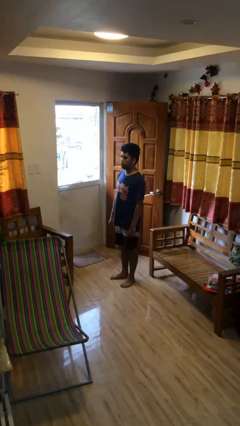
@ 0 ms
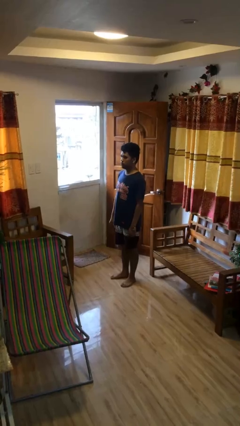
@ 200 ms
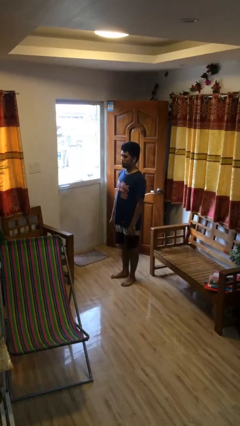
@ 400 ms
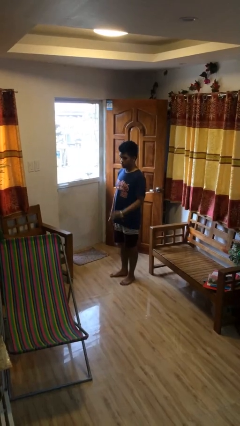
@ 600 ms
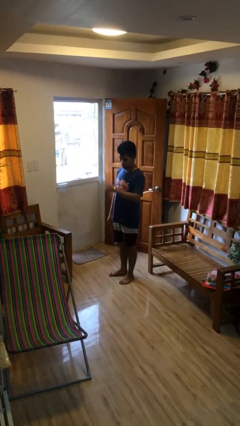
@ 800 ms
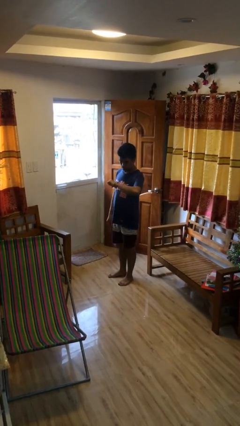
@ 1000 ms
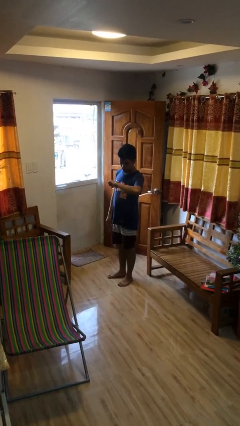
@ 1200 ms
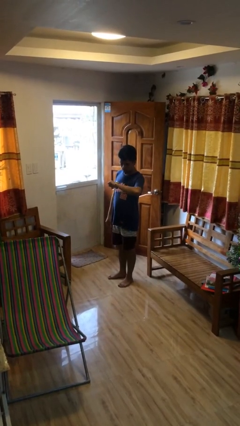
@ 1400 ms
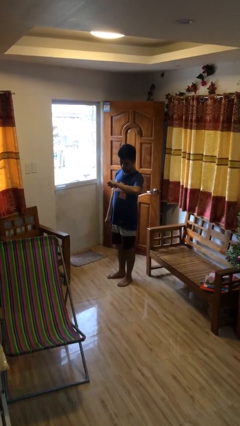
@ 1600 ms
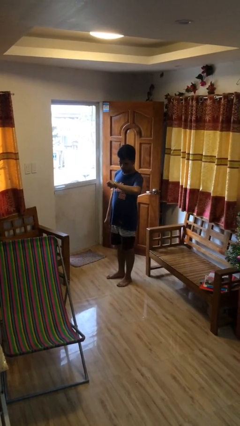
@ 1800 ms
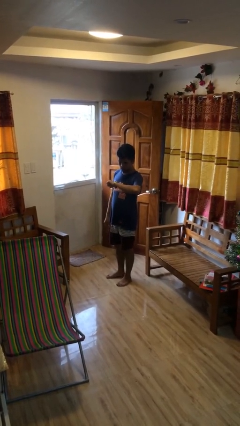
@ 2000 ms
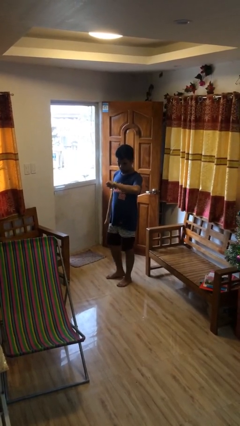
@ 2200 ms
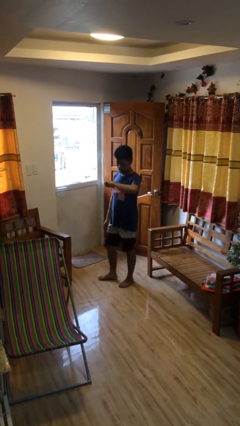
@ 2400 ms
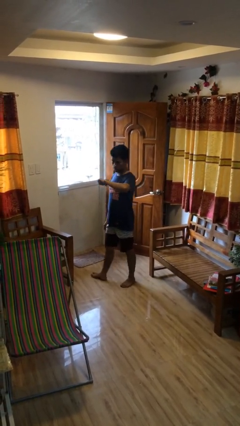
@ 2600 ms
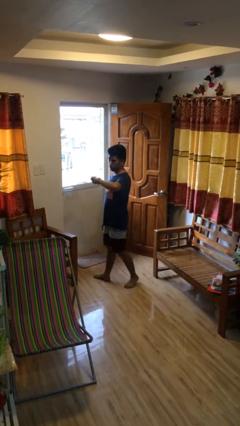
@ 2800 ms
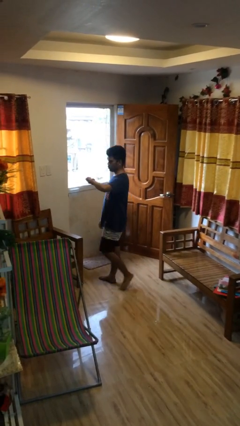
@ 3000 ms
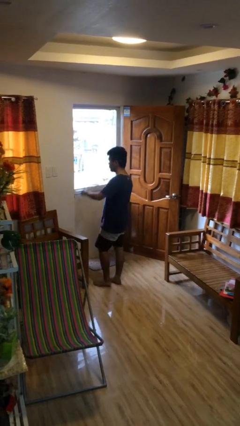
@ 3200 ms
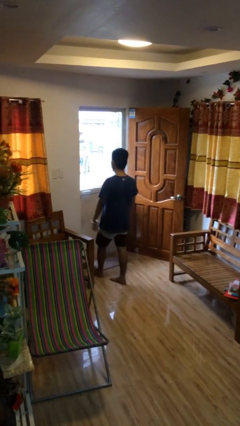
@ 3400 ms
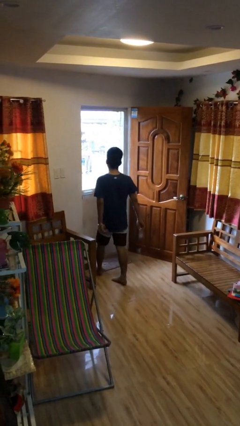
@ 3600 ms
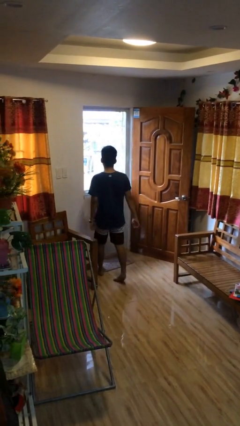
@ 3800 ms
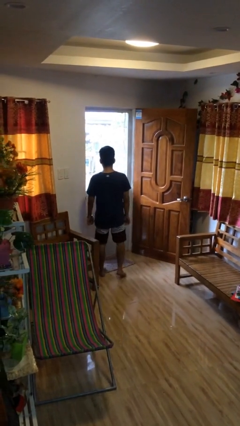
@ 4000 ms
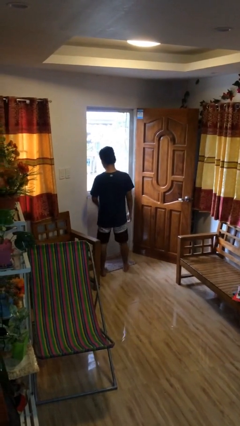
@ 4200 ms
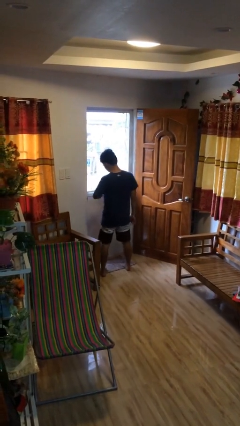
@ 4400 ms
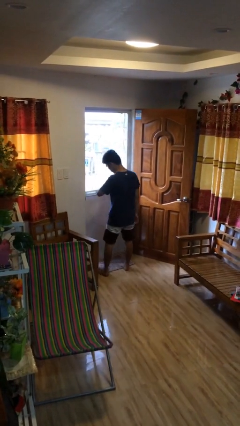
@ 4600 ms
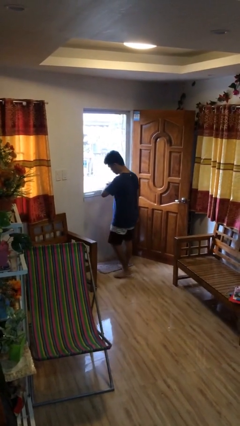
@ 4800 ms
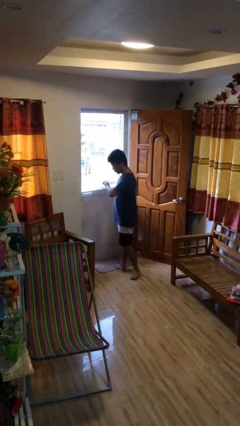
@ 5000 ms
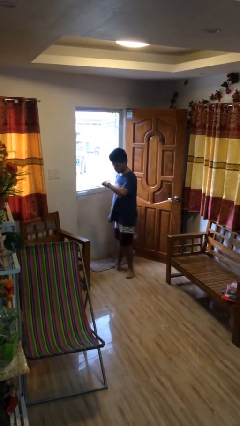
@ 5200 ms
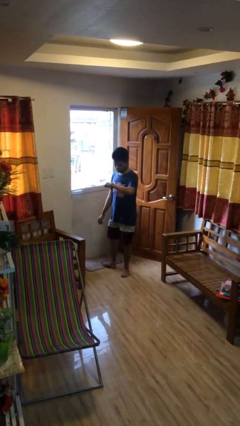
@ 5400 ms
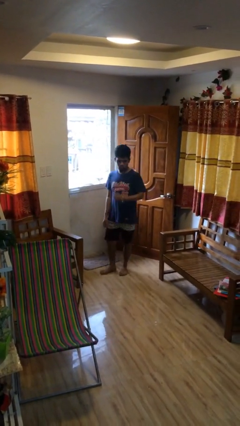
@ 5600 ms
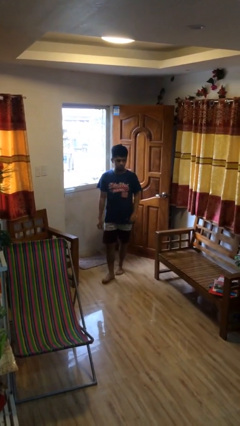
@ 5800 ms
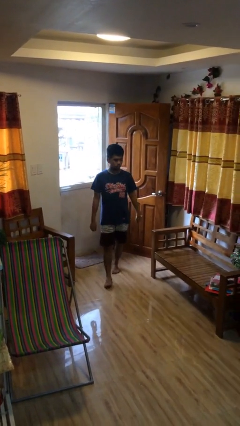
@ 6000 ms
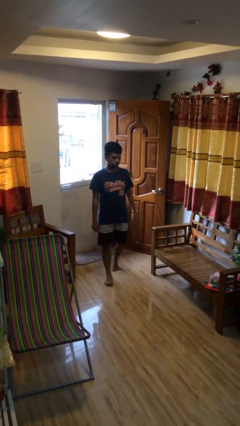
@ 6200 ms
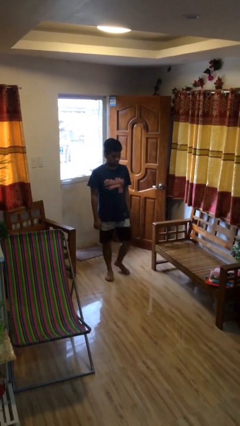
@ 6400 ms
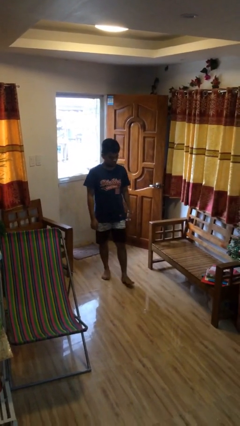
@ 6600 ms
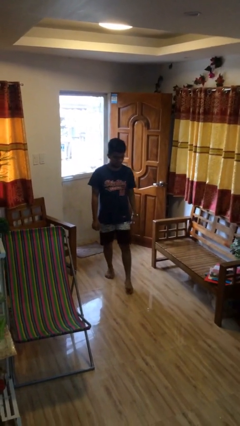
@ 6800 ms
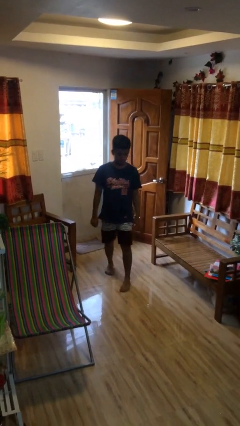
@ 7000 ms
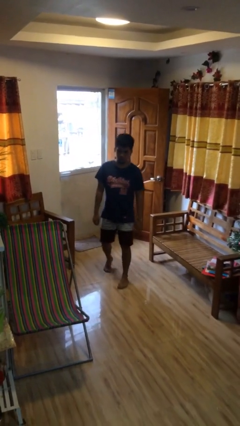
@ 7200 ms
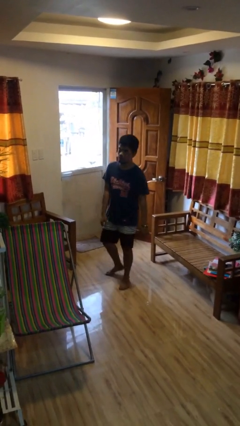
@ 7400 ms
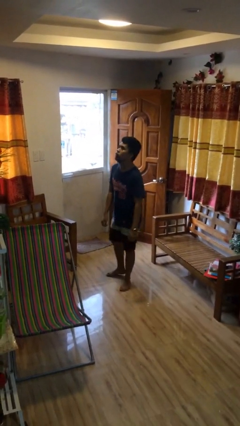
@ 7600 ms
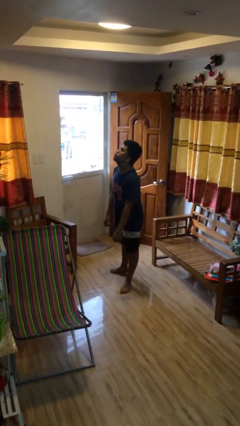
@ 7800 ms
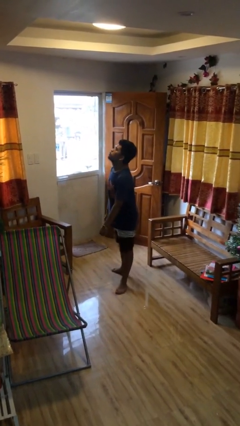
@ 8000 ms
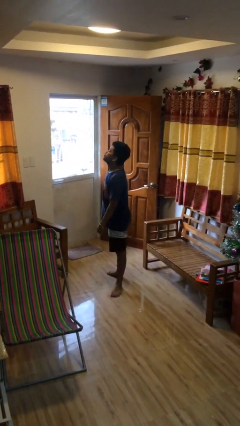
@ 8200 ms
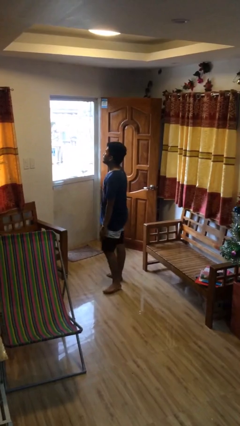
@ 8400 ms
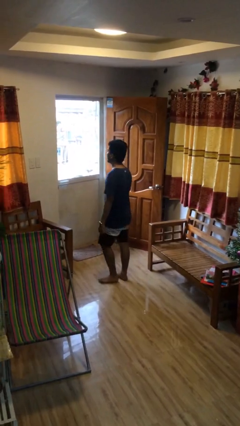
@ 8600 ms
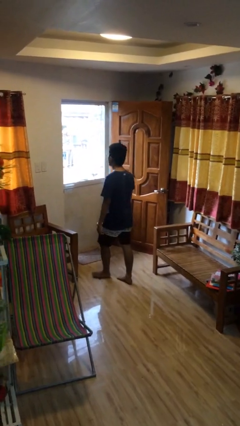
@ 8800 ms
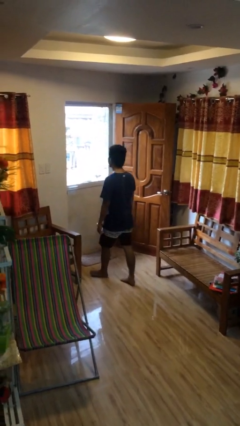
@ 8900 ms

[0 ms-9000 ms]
person walks

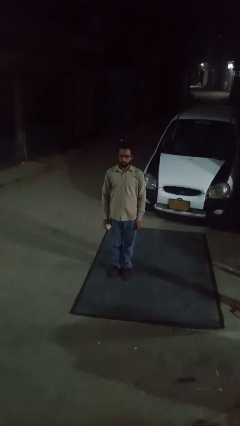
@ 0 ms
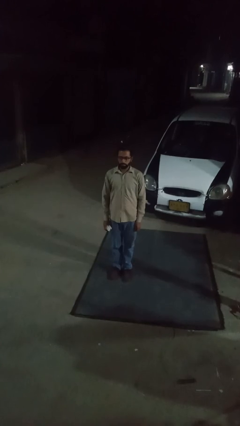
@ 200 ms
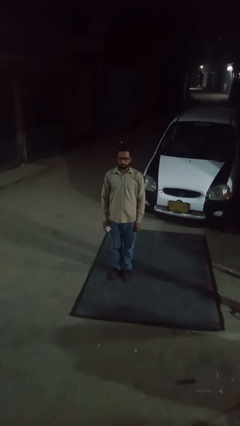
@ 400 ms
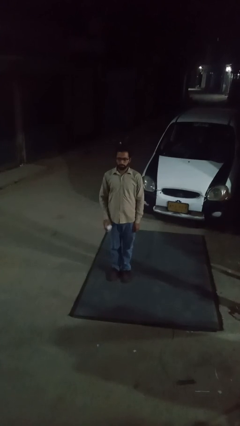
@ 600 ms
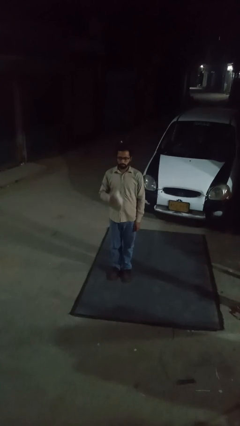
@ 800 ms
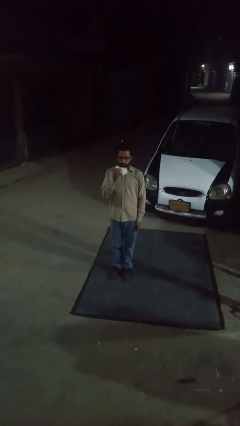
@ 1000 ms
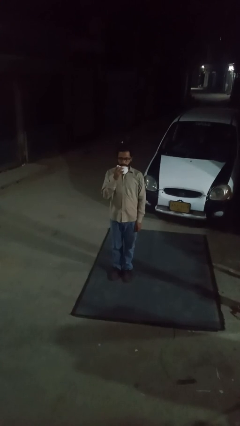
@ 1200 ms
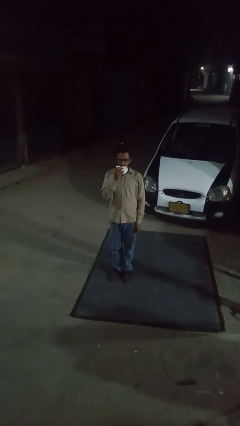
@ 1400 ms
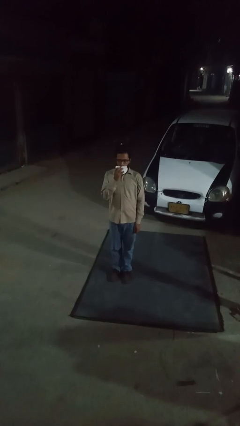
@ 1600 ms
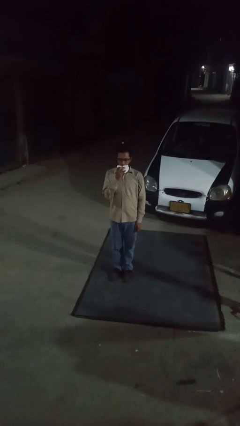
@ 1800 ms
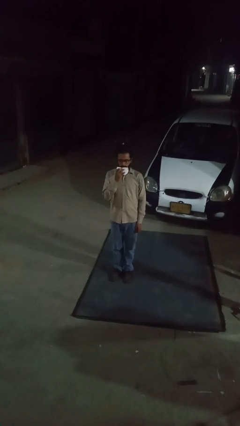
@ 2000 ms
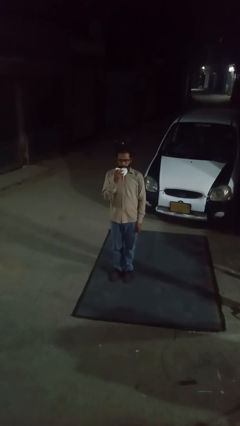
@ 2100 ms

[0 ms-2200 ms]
person wipes mouth with napkin

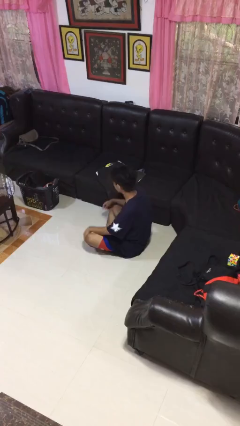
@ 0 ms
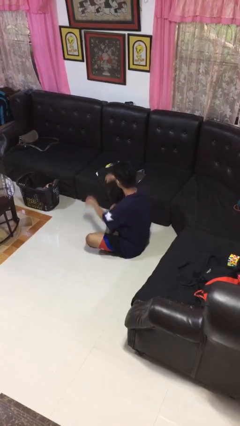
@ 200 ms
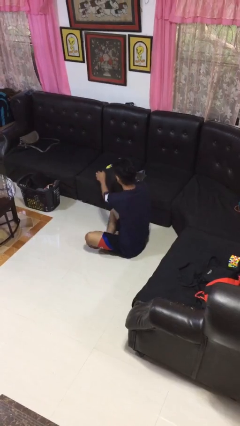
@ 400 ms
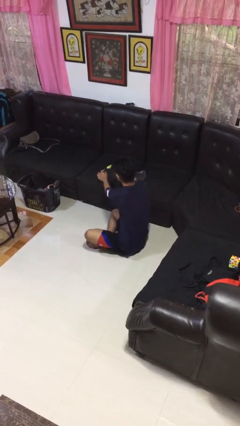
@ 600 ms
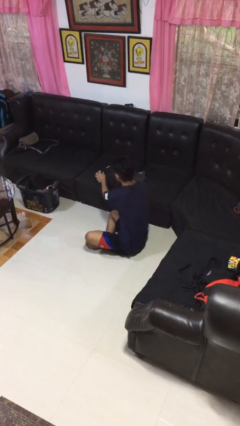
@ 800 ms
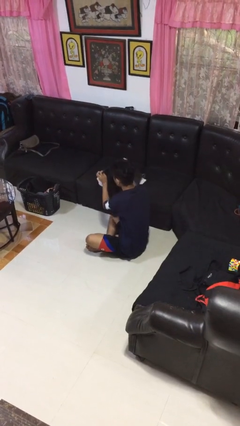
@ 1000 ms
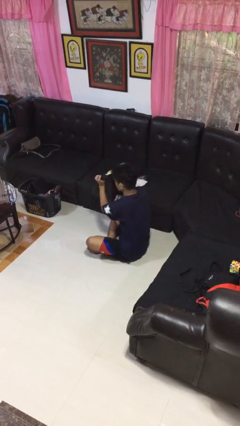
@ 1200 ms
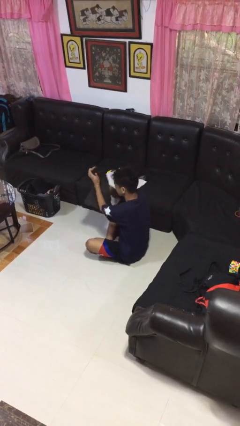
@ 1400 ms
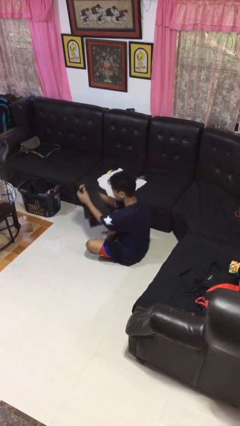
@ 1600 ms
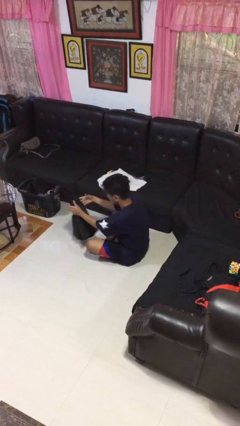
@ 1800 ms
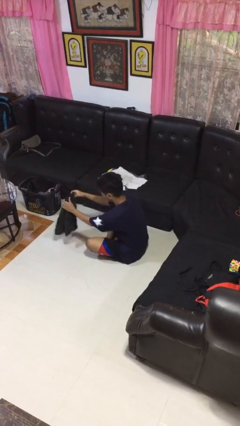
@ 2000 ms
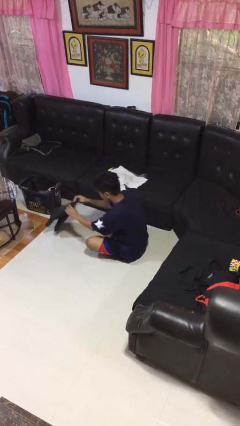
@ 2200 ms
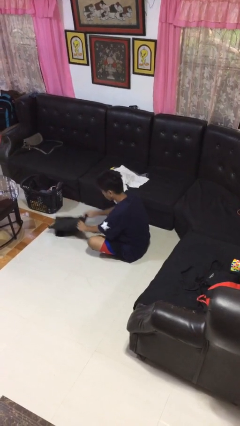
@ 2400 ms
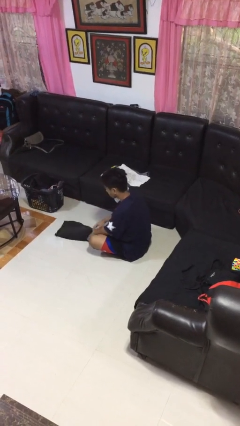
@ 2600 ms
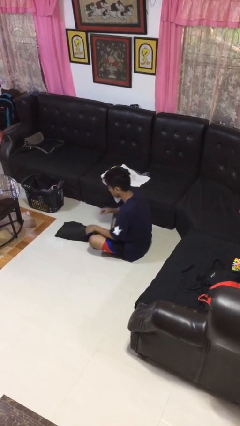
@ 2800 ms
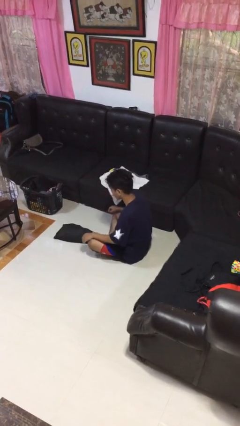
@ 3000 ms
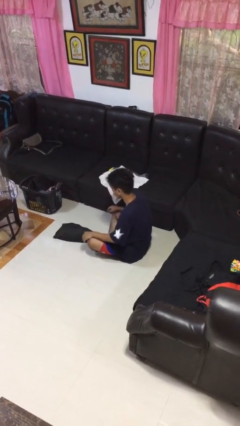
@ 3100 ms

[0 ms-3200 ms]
person folds pants

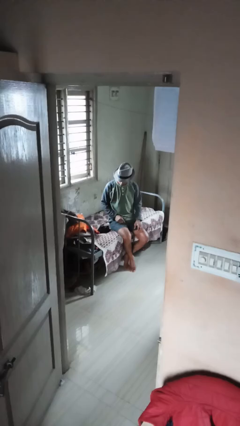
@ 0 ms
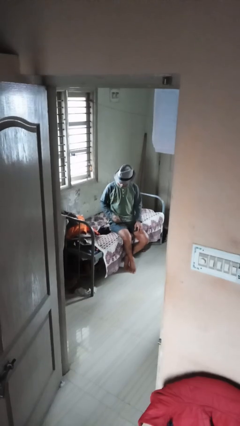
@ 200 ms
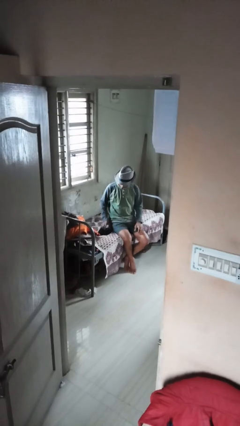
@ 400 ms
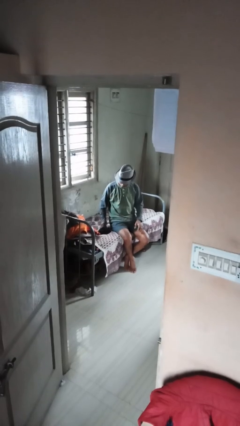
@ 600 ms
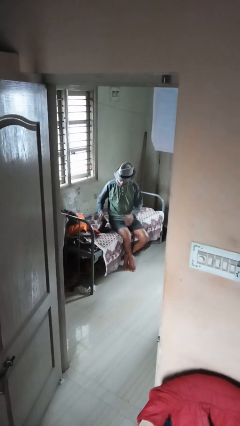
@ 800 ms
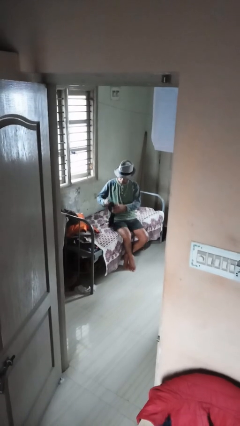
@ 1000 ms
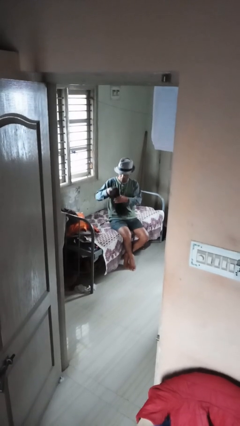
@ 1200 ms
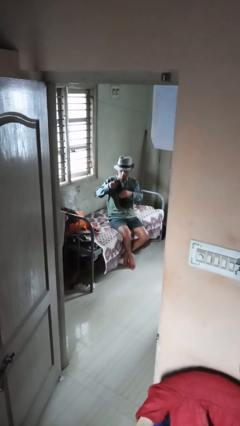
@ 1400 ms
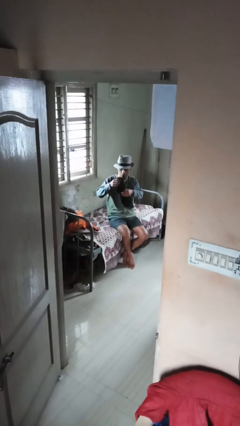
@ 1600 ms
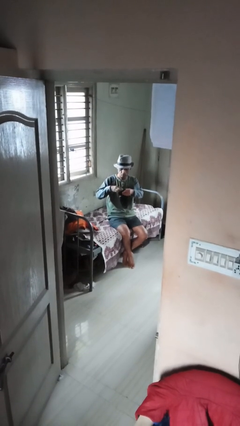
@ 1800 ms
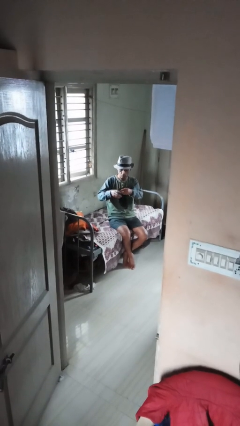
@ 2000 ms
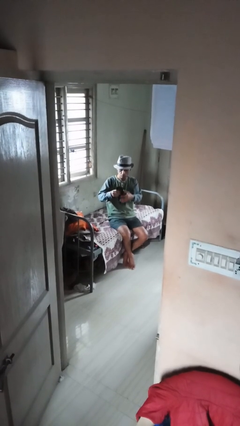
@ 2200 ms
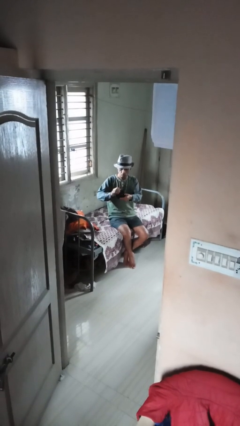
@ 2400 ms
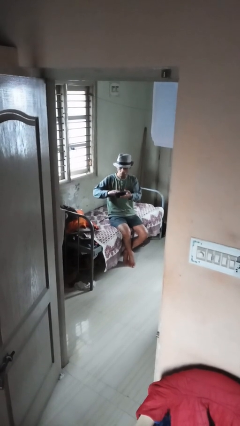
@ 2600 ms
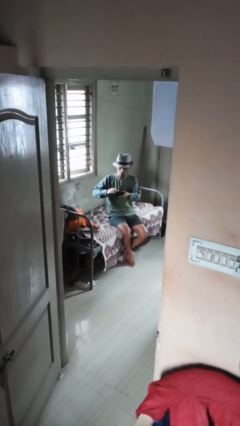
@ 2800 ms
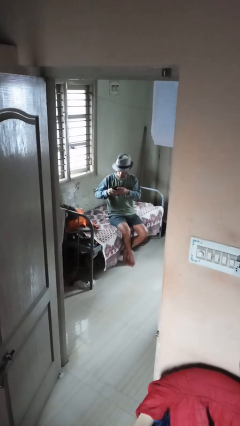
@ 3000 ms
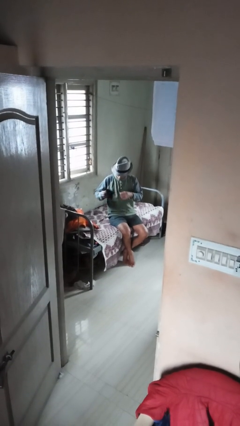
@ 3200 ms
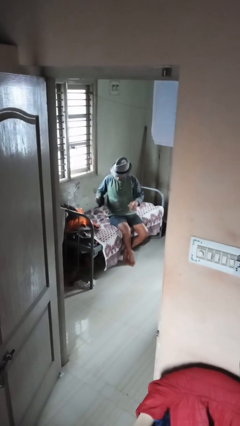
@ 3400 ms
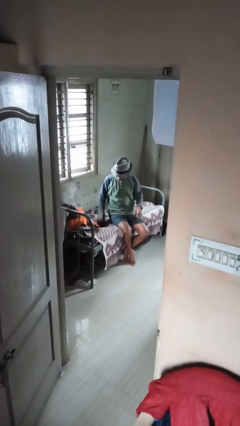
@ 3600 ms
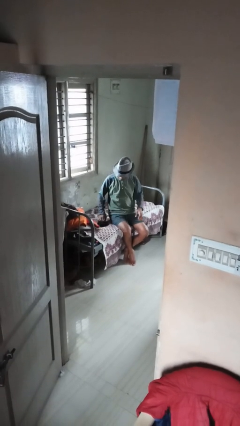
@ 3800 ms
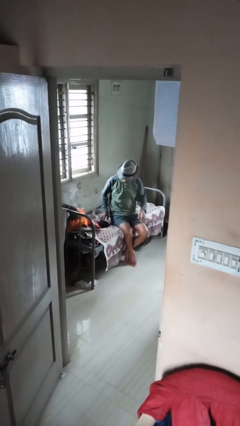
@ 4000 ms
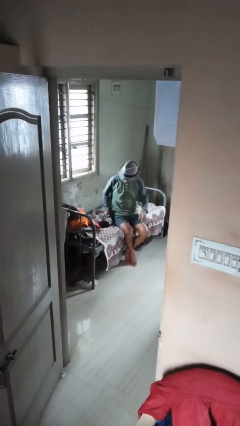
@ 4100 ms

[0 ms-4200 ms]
person folds socks
